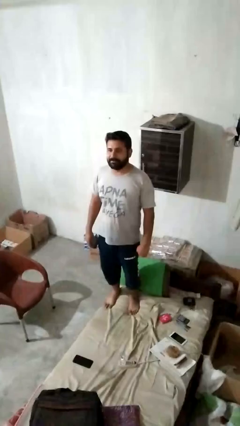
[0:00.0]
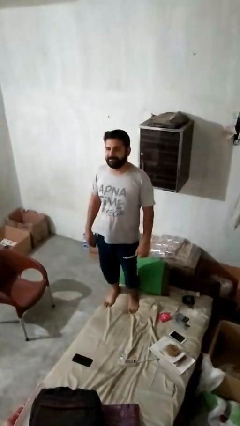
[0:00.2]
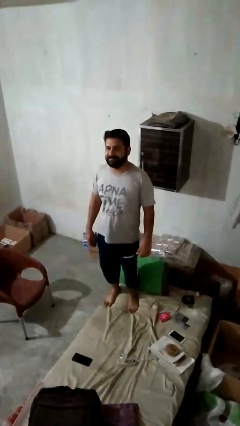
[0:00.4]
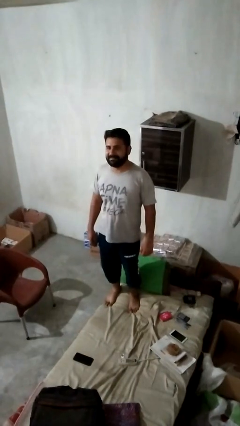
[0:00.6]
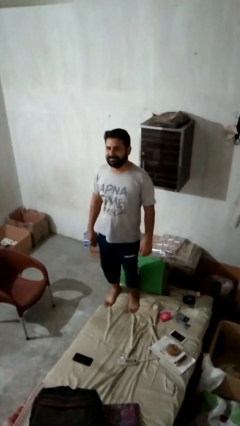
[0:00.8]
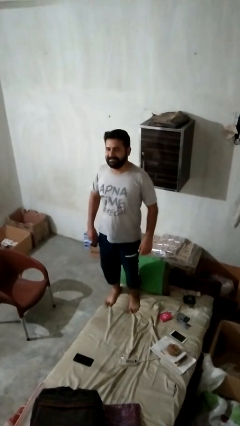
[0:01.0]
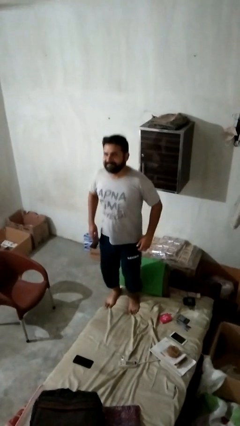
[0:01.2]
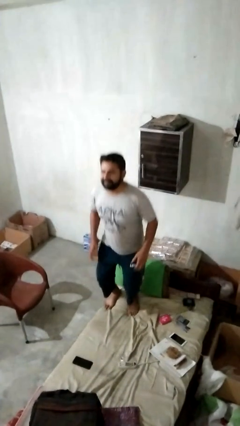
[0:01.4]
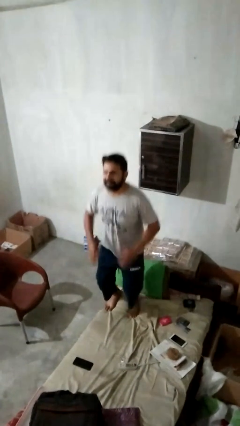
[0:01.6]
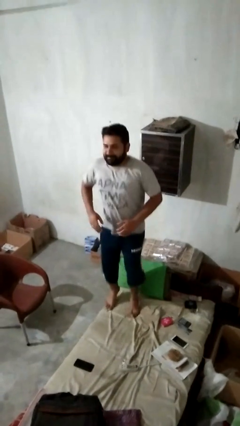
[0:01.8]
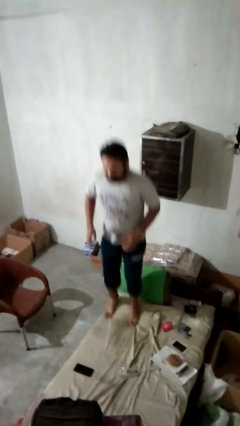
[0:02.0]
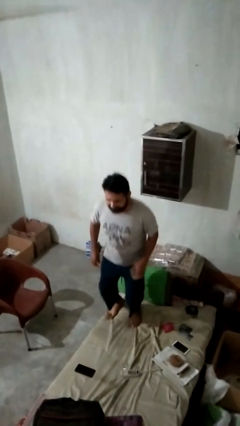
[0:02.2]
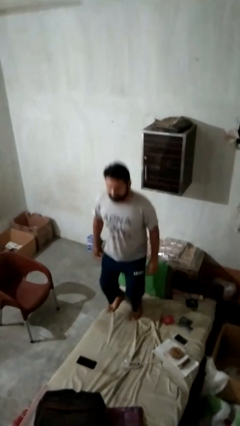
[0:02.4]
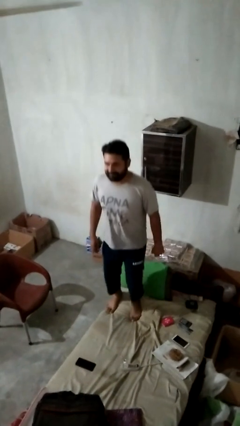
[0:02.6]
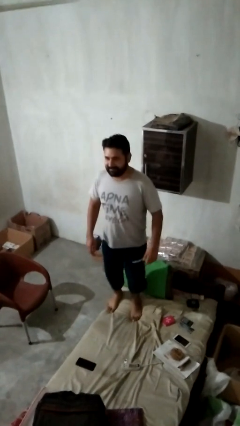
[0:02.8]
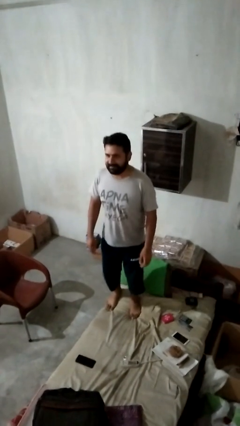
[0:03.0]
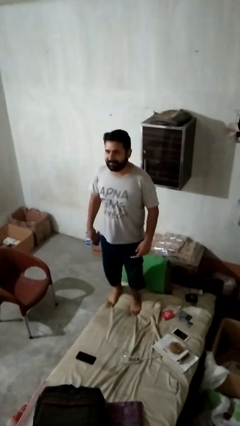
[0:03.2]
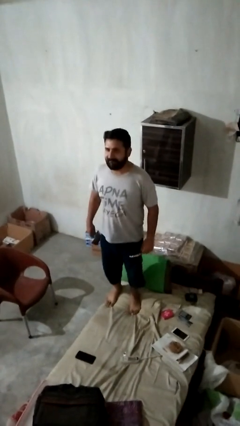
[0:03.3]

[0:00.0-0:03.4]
person jumps on bed

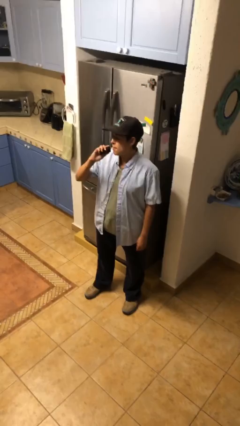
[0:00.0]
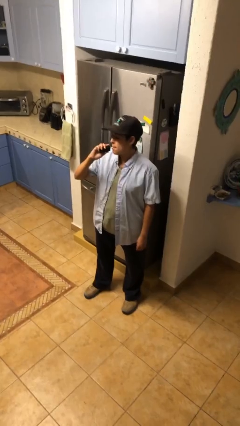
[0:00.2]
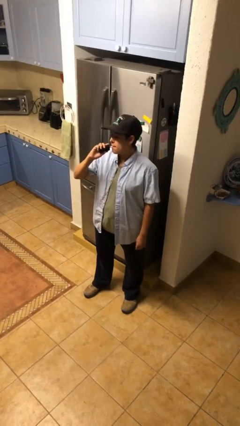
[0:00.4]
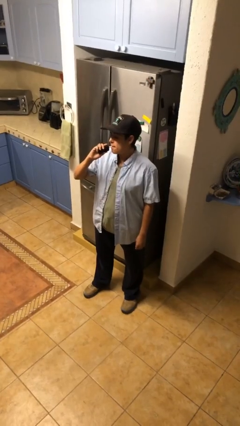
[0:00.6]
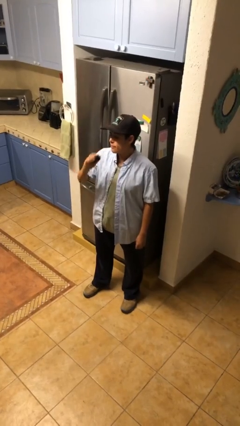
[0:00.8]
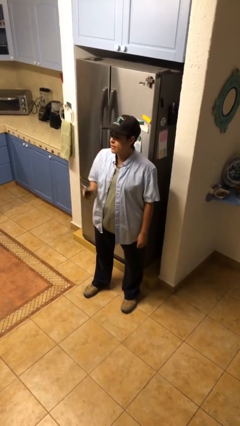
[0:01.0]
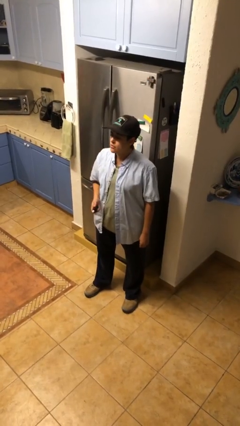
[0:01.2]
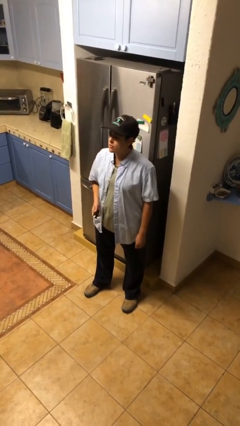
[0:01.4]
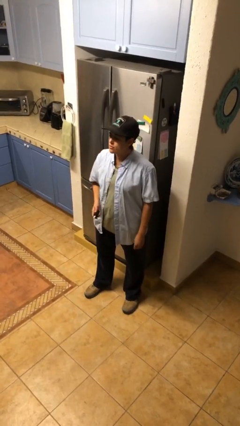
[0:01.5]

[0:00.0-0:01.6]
person vapes

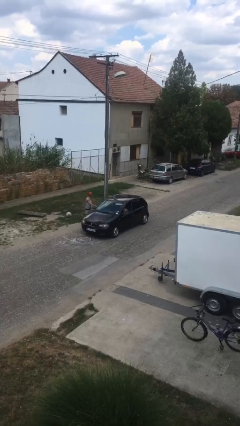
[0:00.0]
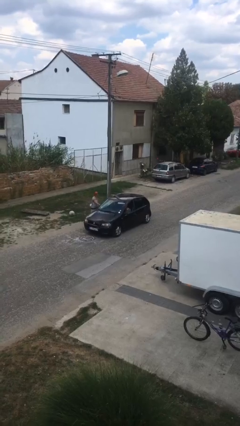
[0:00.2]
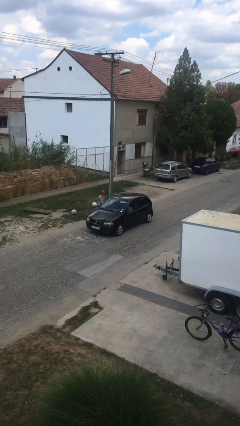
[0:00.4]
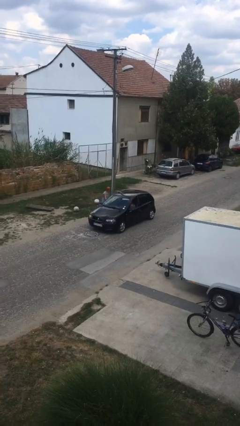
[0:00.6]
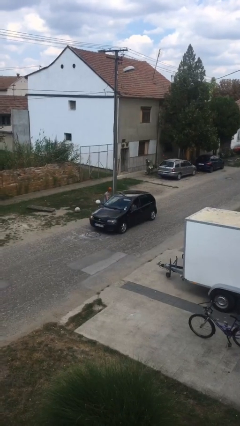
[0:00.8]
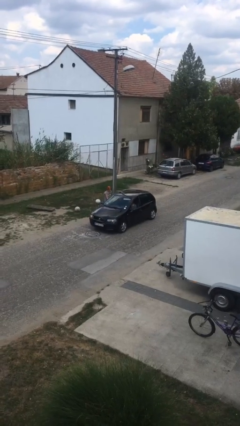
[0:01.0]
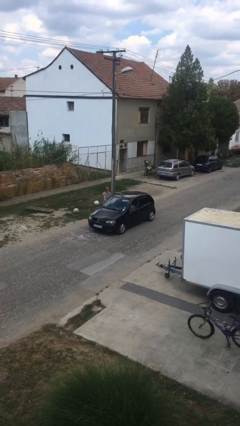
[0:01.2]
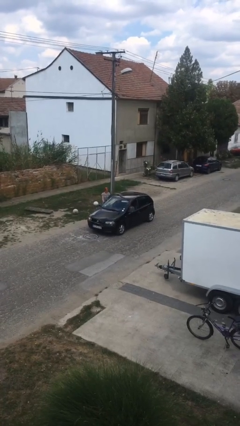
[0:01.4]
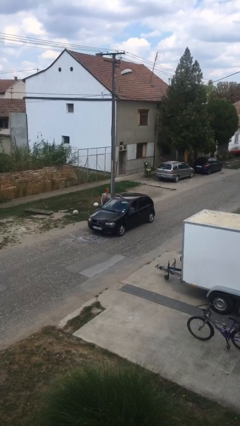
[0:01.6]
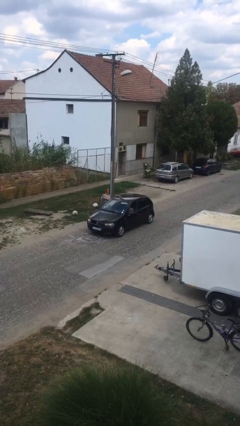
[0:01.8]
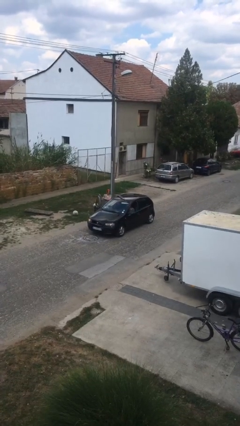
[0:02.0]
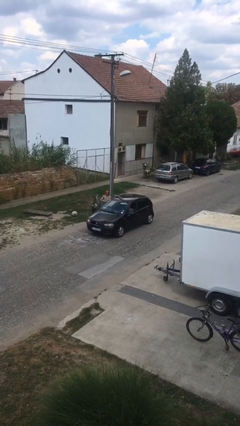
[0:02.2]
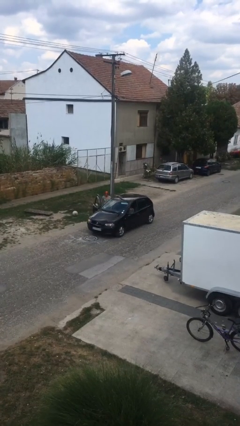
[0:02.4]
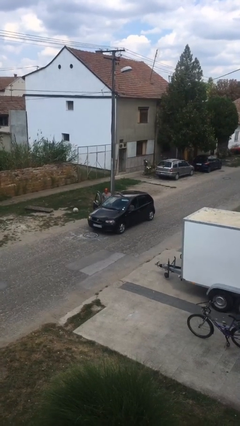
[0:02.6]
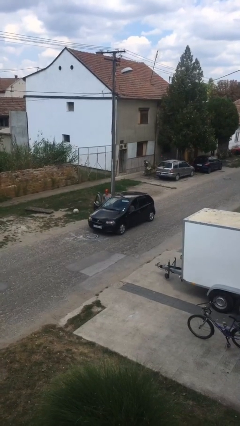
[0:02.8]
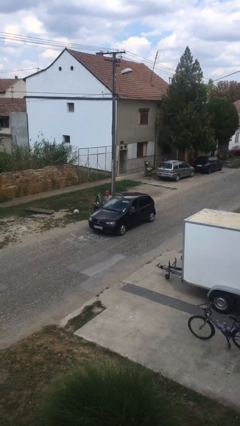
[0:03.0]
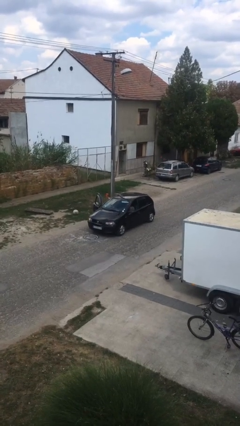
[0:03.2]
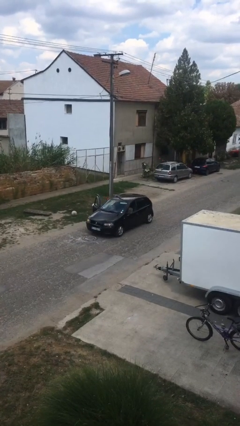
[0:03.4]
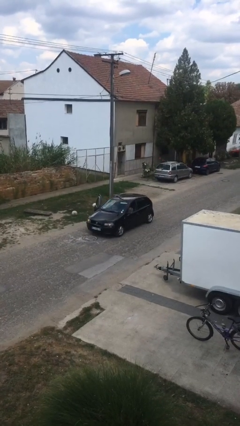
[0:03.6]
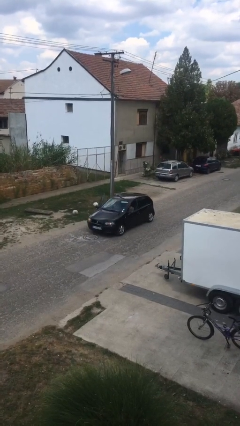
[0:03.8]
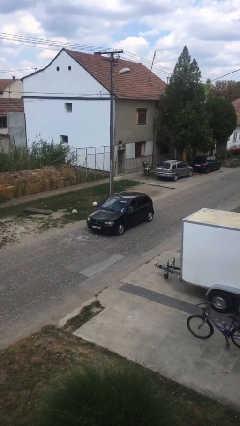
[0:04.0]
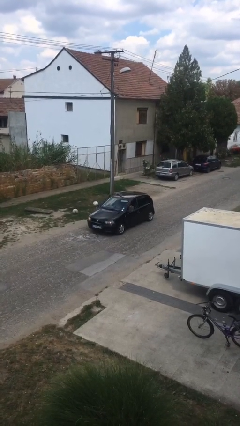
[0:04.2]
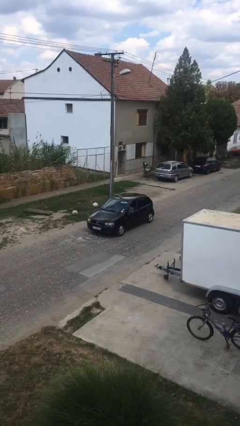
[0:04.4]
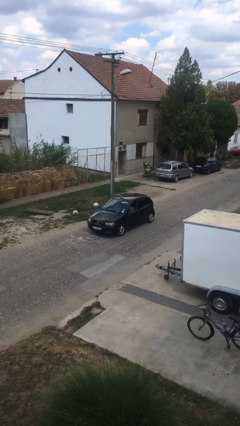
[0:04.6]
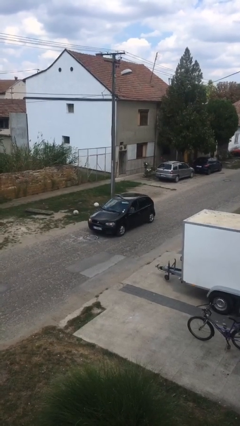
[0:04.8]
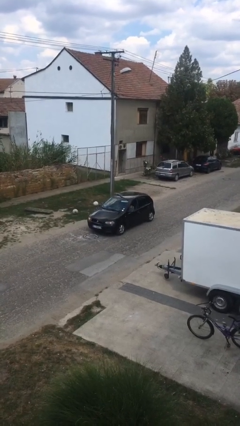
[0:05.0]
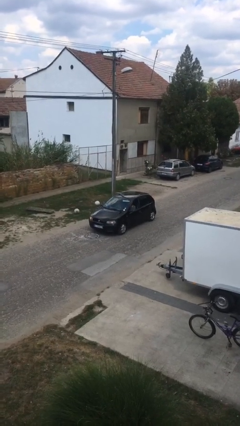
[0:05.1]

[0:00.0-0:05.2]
car picks up person

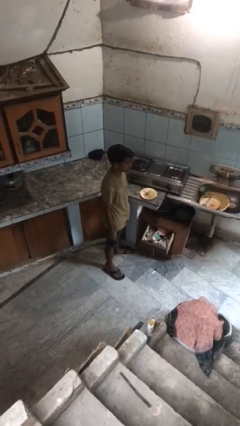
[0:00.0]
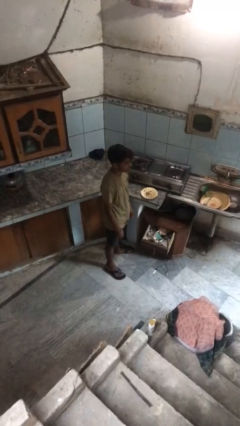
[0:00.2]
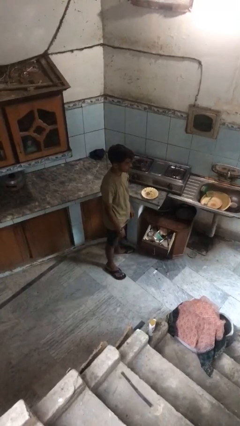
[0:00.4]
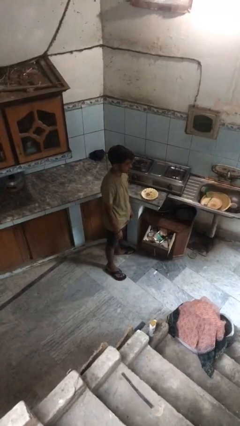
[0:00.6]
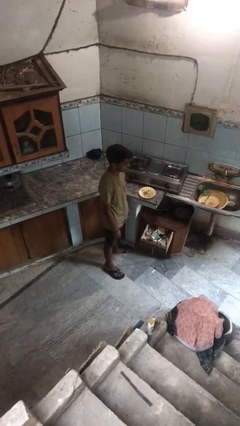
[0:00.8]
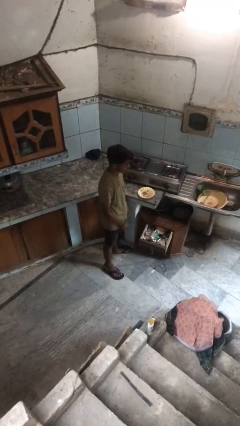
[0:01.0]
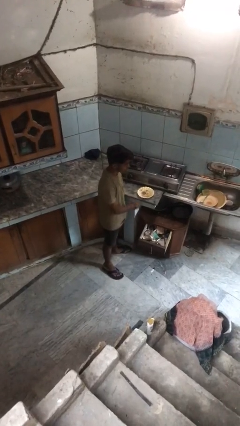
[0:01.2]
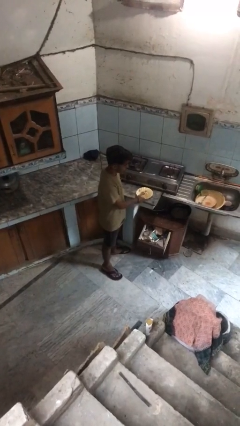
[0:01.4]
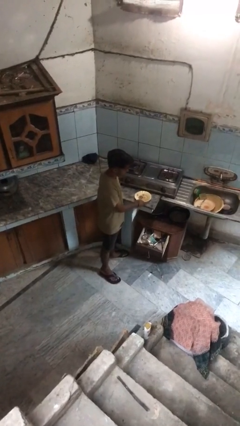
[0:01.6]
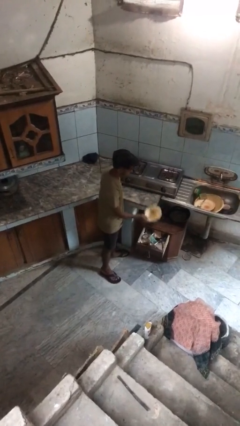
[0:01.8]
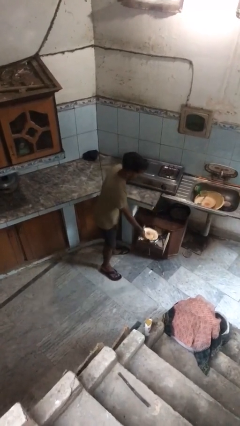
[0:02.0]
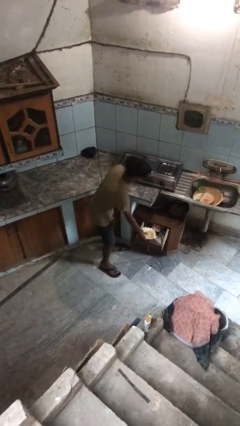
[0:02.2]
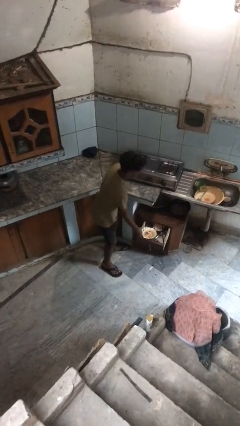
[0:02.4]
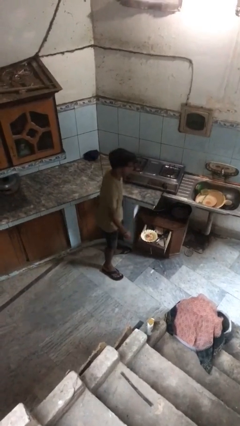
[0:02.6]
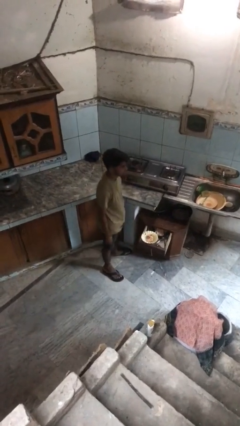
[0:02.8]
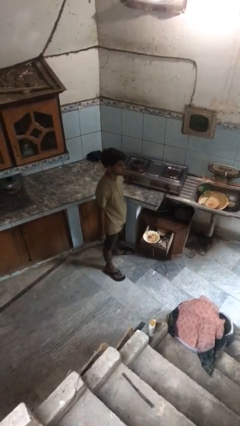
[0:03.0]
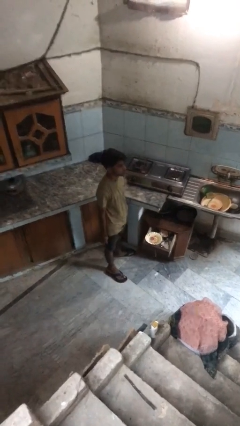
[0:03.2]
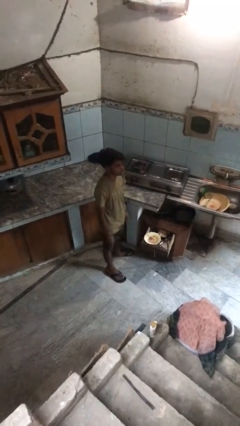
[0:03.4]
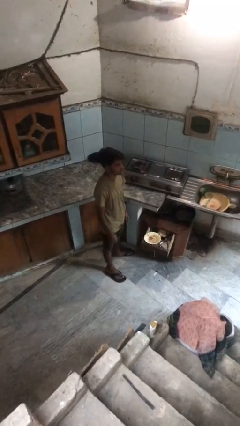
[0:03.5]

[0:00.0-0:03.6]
person puts object into kitchen drawer

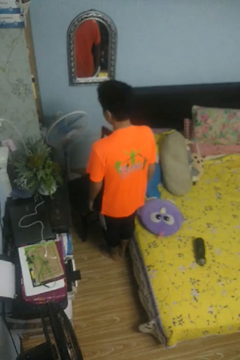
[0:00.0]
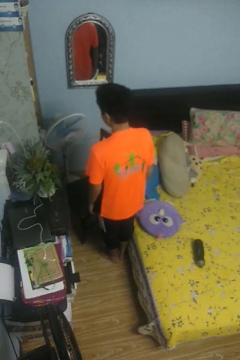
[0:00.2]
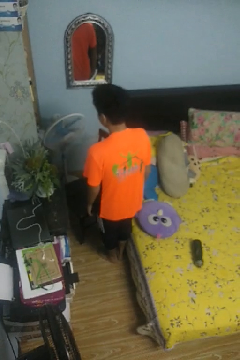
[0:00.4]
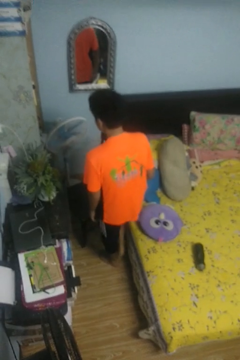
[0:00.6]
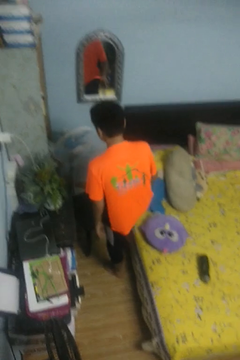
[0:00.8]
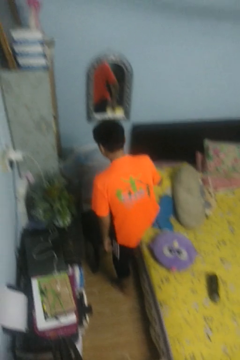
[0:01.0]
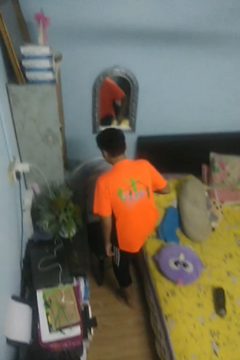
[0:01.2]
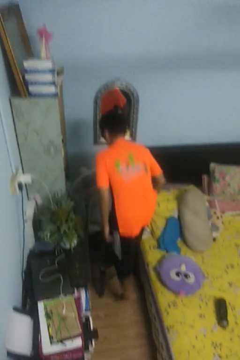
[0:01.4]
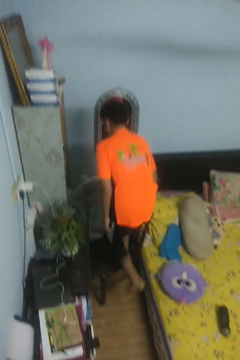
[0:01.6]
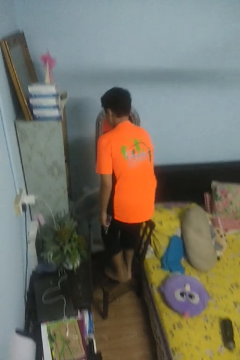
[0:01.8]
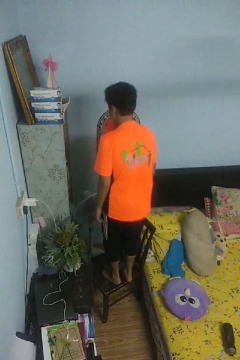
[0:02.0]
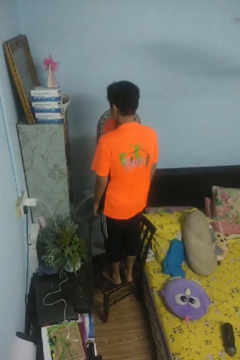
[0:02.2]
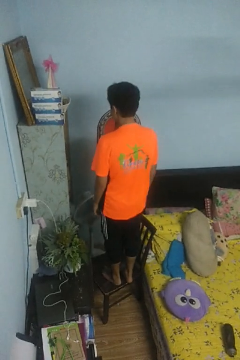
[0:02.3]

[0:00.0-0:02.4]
person climbs on chair

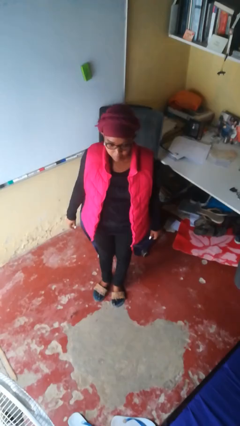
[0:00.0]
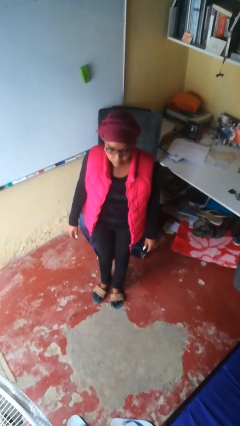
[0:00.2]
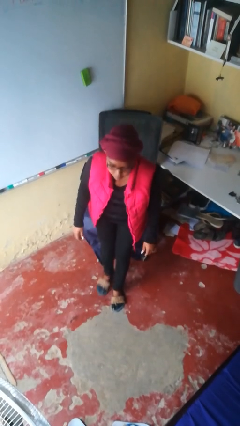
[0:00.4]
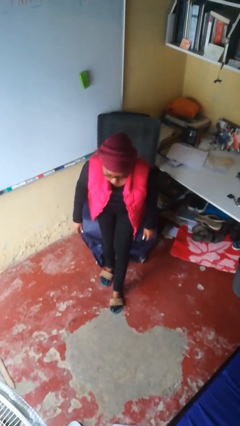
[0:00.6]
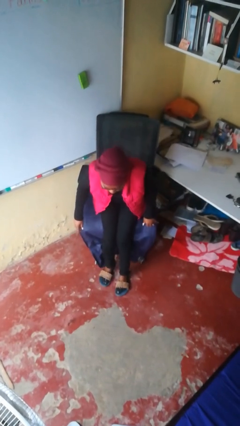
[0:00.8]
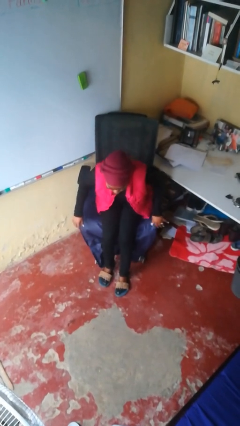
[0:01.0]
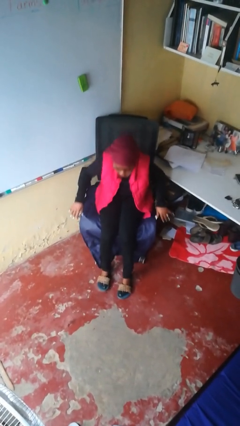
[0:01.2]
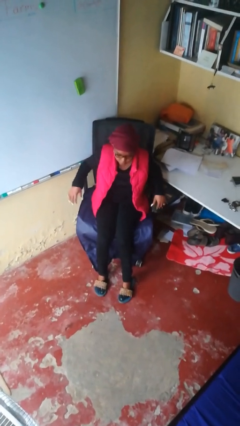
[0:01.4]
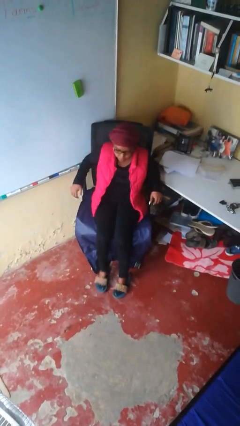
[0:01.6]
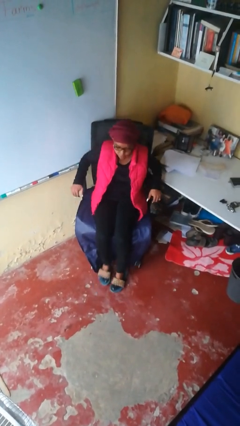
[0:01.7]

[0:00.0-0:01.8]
person sits down
